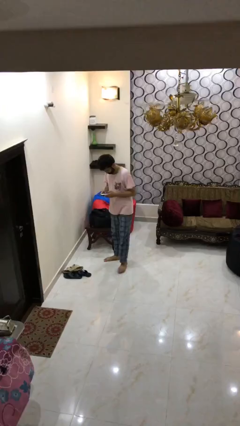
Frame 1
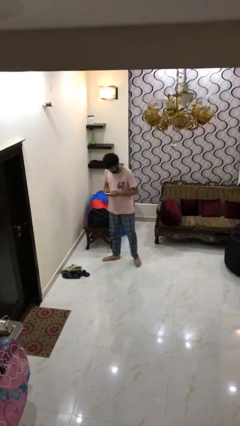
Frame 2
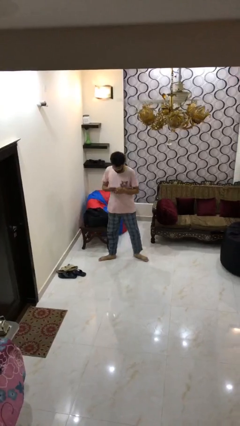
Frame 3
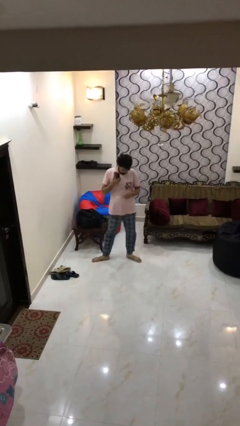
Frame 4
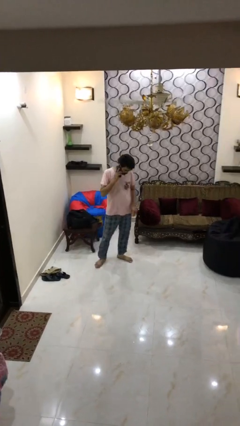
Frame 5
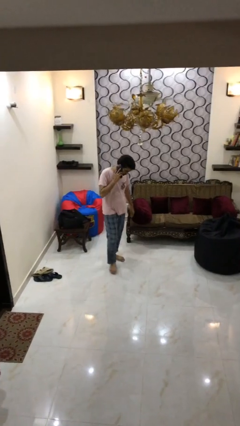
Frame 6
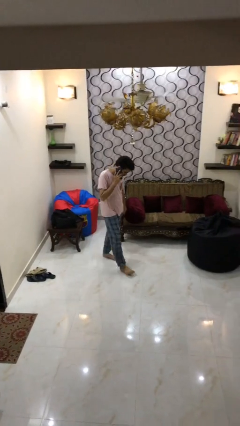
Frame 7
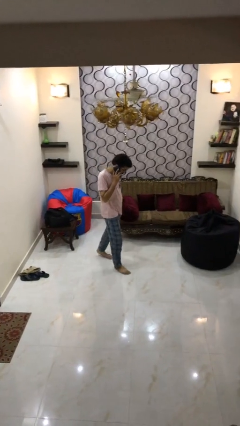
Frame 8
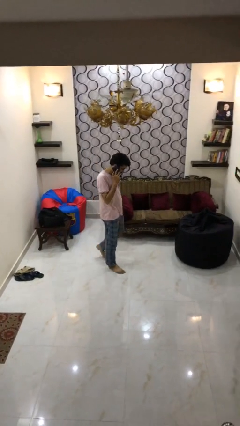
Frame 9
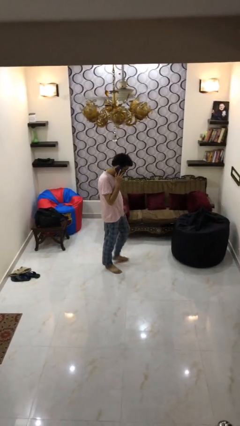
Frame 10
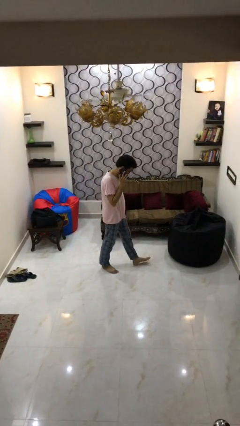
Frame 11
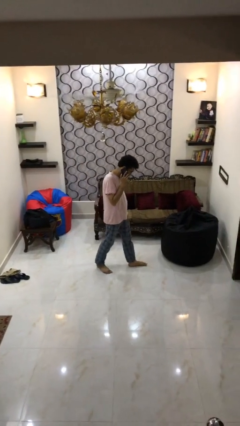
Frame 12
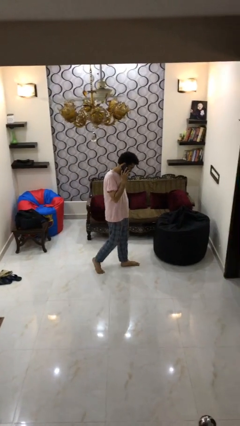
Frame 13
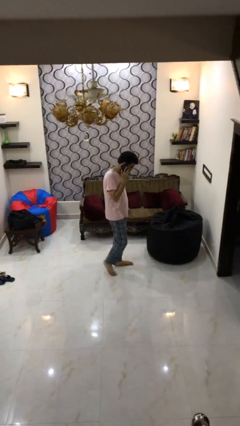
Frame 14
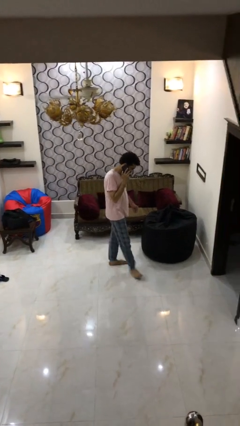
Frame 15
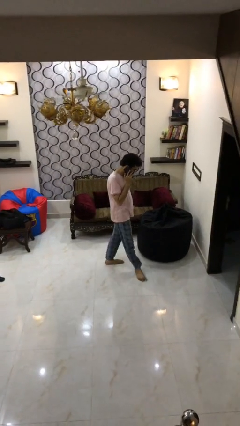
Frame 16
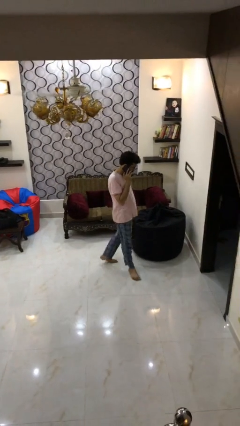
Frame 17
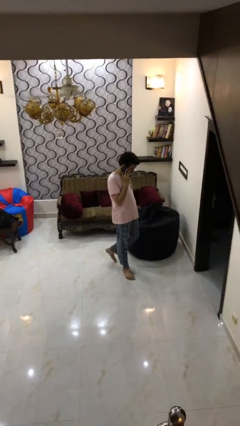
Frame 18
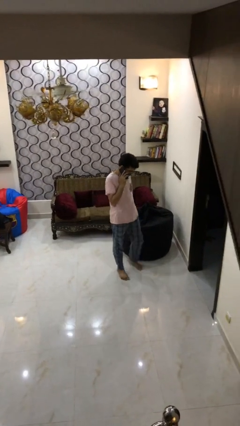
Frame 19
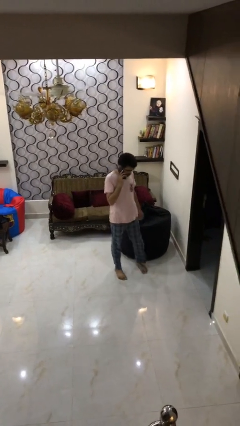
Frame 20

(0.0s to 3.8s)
person talks on phone

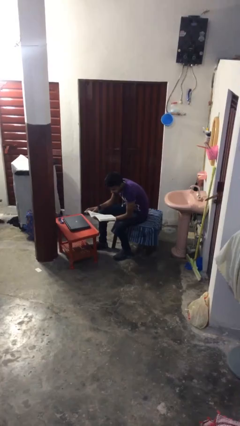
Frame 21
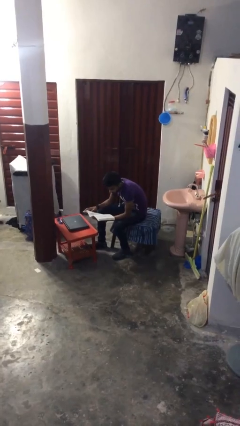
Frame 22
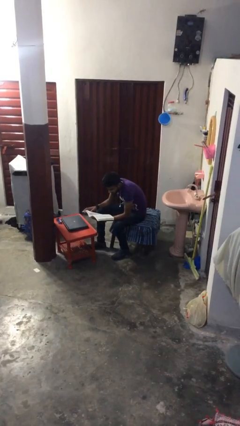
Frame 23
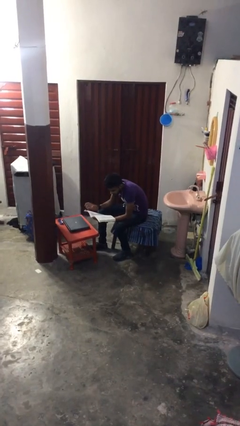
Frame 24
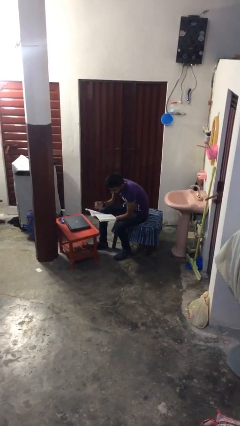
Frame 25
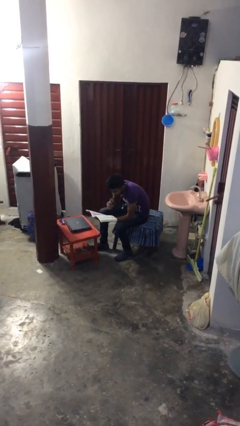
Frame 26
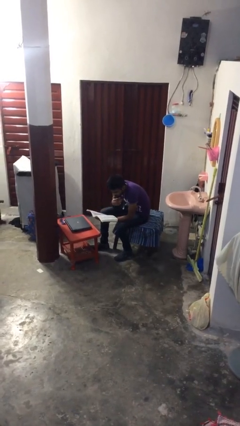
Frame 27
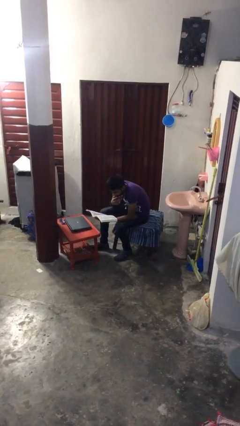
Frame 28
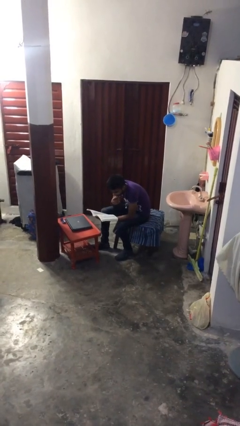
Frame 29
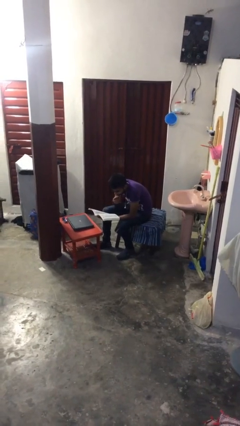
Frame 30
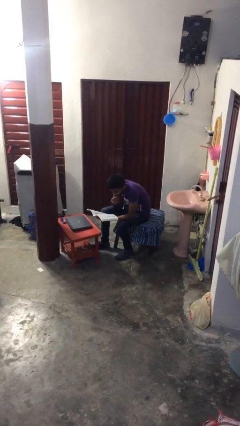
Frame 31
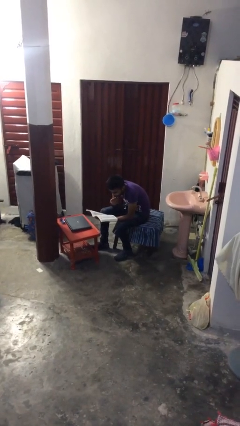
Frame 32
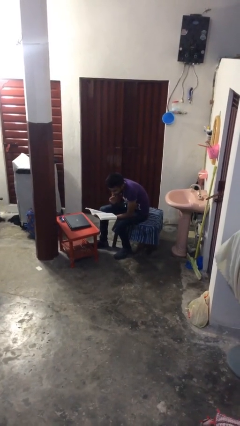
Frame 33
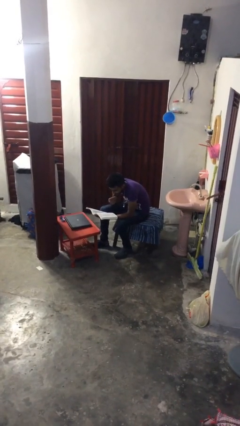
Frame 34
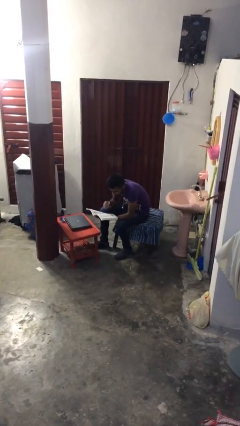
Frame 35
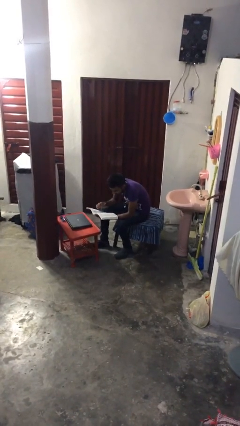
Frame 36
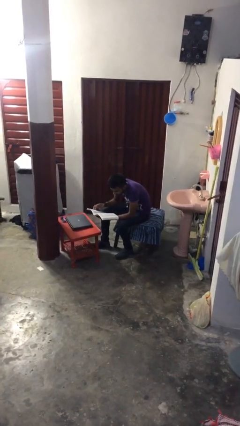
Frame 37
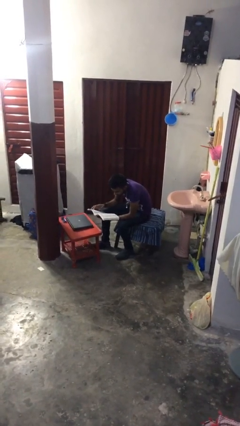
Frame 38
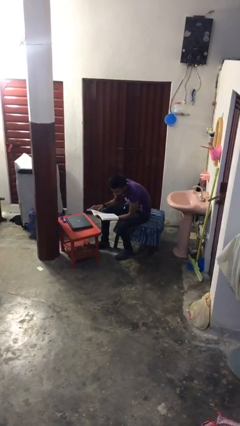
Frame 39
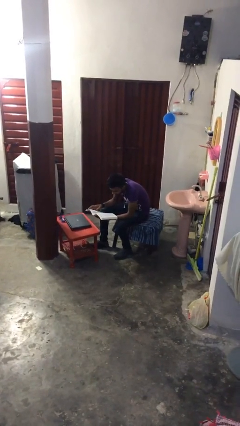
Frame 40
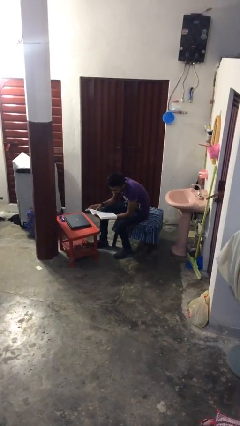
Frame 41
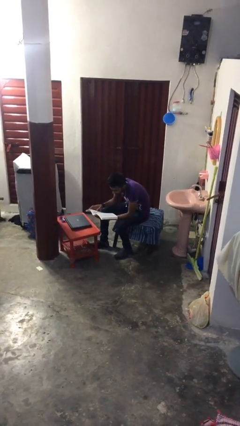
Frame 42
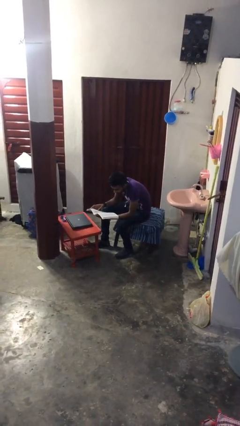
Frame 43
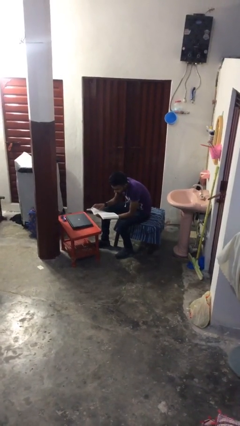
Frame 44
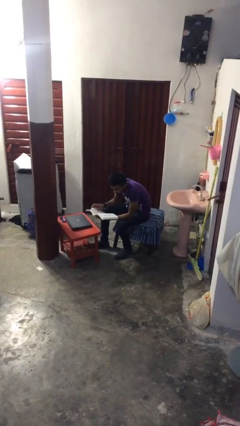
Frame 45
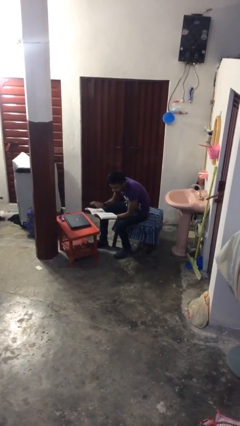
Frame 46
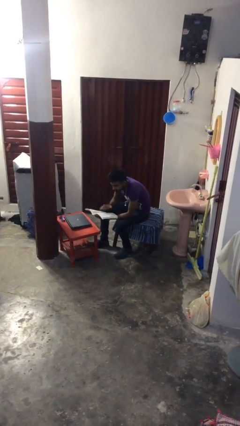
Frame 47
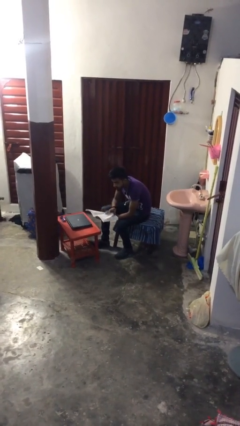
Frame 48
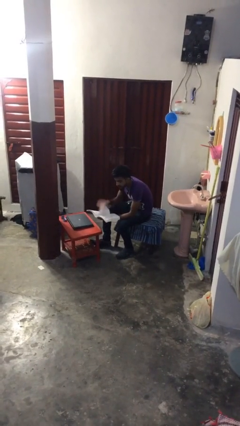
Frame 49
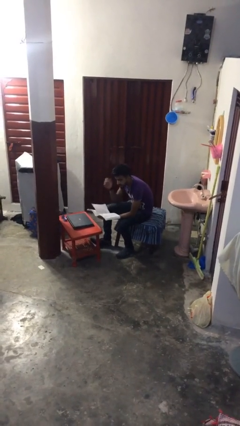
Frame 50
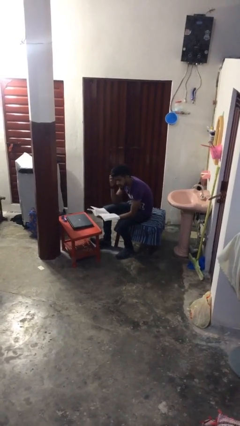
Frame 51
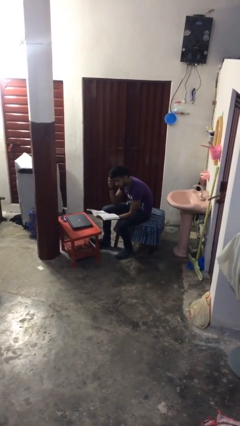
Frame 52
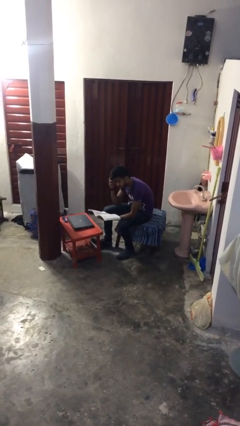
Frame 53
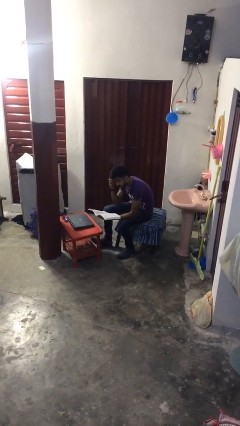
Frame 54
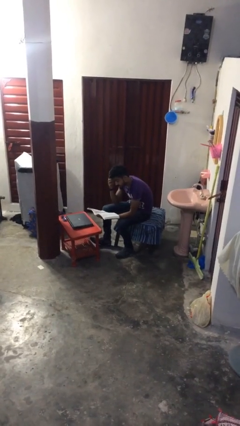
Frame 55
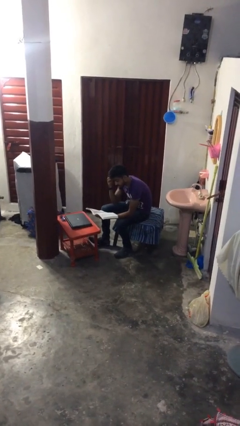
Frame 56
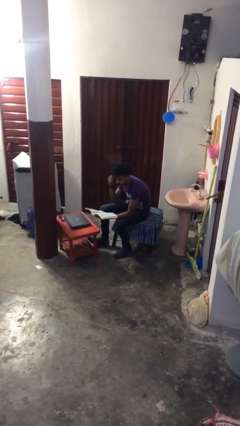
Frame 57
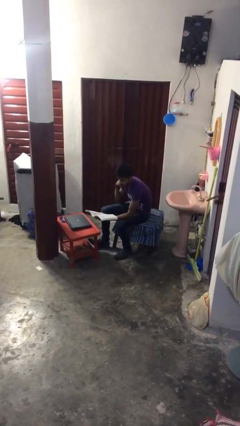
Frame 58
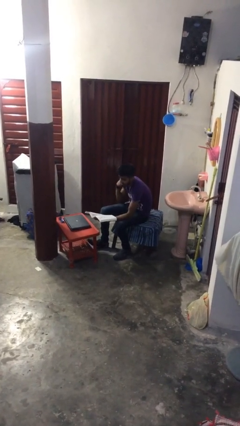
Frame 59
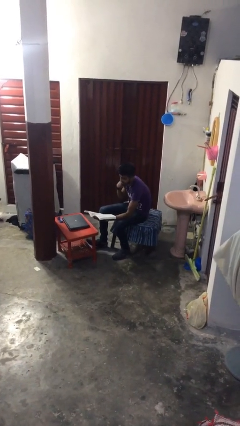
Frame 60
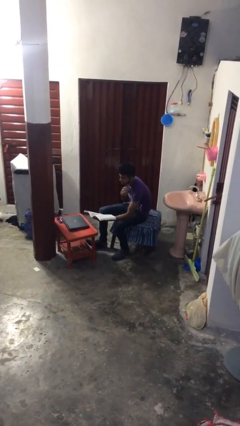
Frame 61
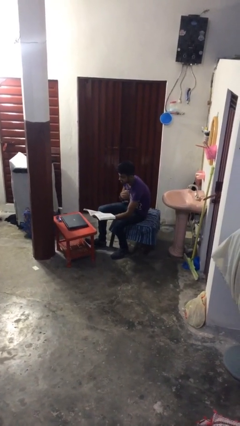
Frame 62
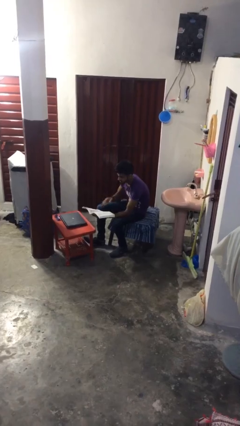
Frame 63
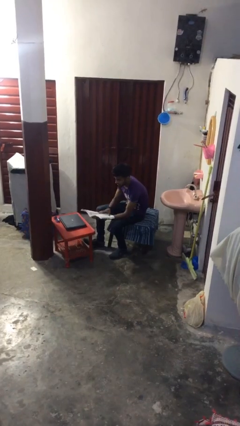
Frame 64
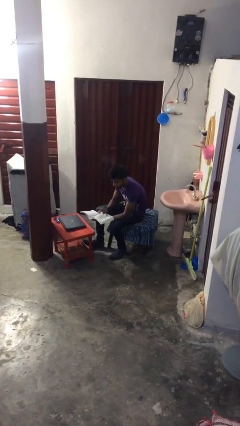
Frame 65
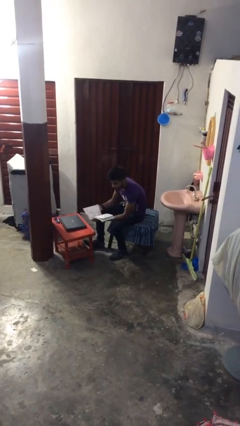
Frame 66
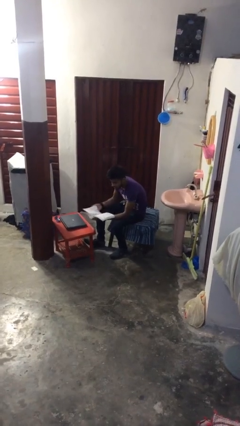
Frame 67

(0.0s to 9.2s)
person reads document

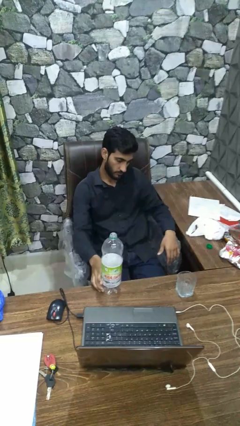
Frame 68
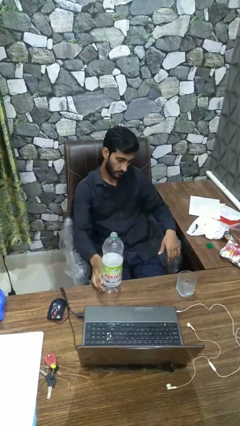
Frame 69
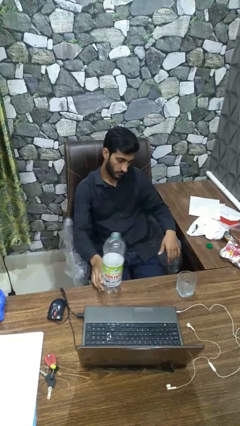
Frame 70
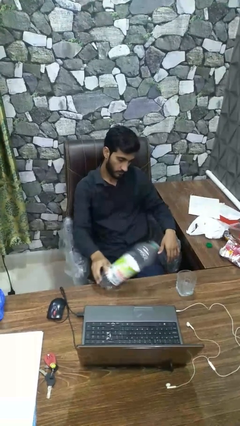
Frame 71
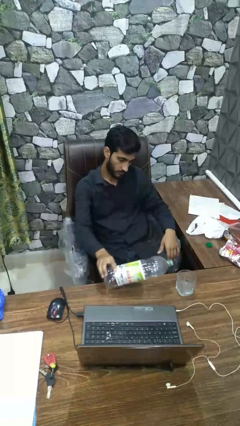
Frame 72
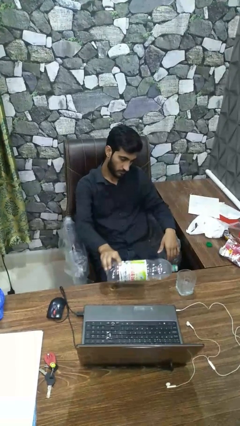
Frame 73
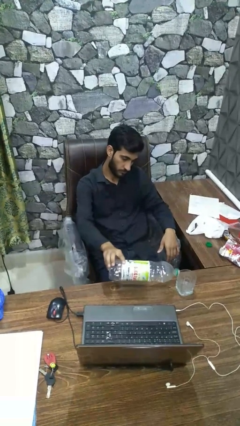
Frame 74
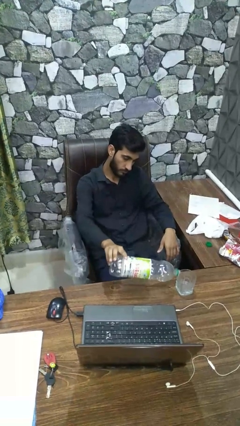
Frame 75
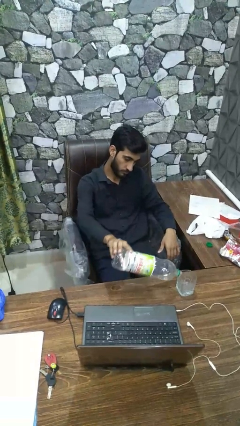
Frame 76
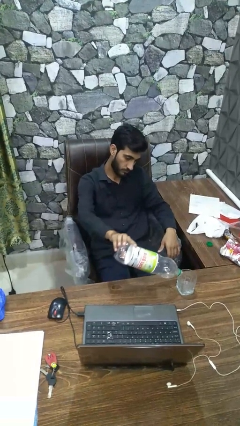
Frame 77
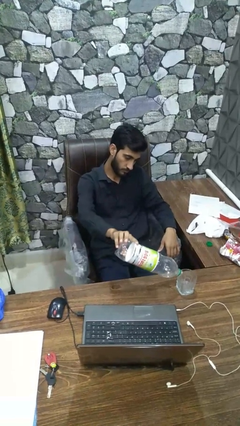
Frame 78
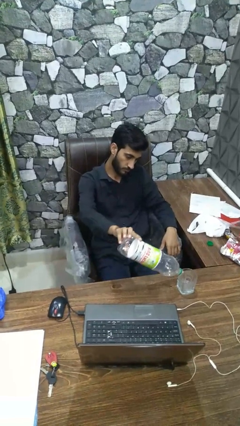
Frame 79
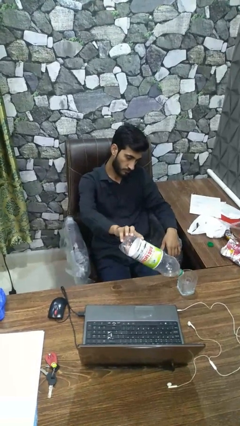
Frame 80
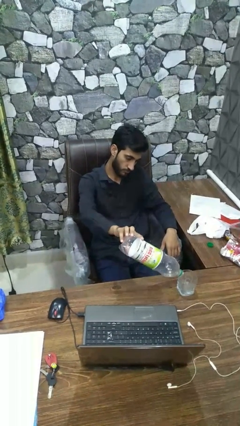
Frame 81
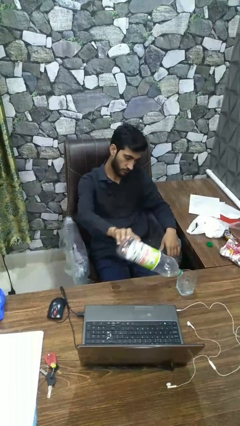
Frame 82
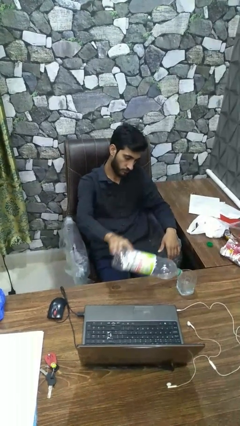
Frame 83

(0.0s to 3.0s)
person pours liquid into cup

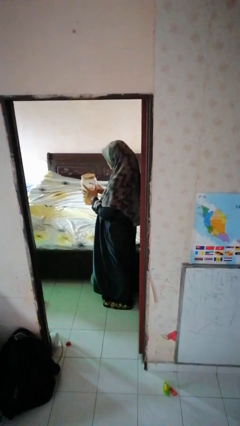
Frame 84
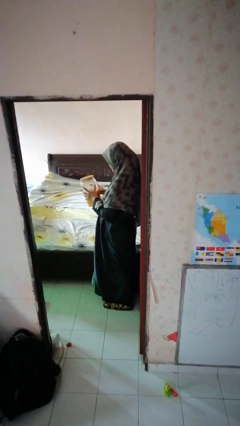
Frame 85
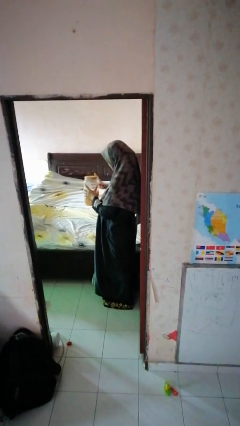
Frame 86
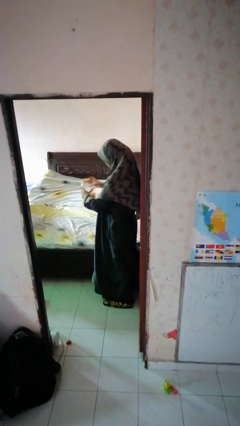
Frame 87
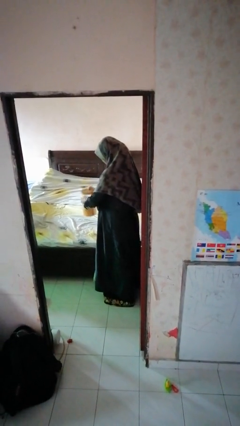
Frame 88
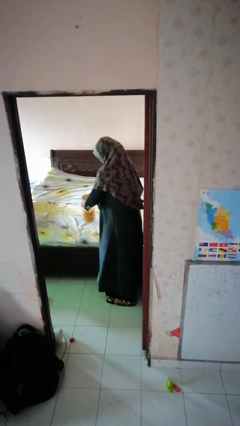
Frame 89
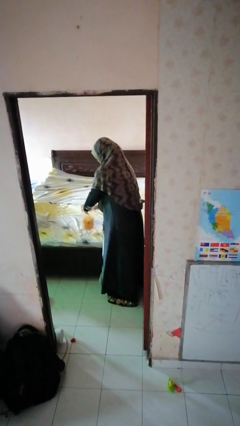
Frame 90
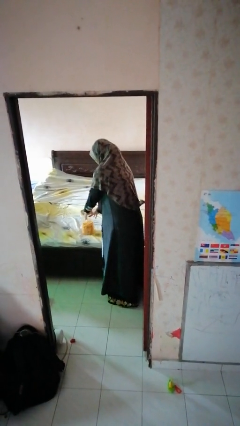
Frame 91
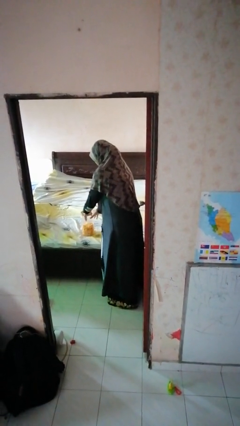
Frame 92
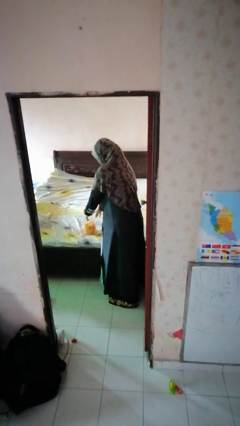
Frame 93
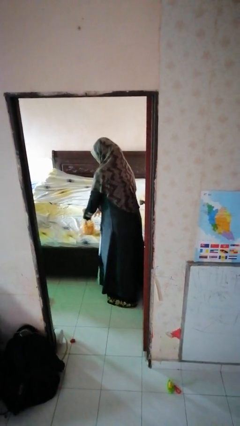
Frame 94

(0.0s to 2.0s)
person puts down object on bed
